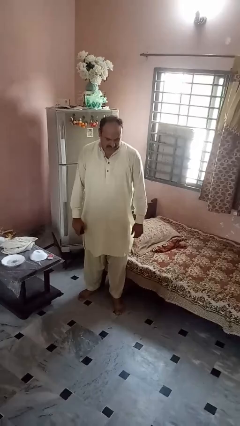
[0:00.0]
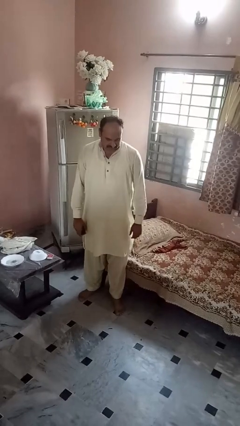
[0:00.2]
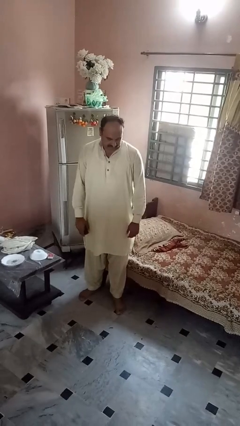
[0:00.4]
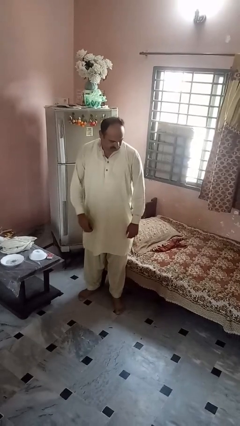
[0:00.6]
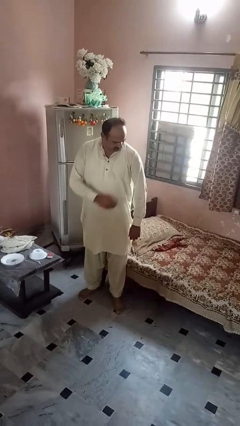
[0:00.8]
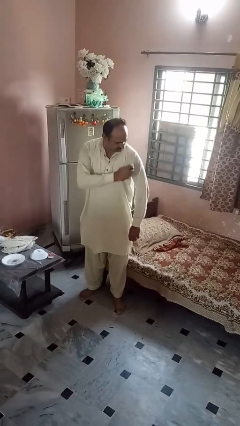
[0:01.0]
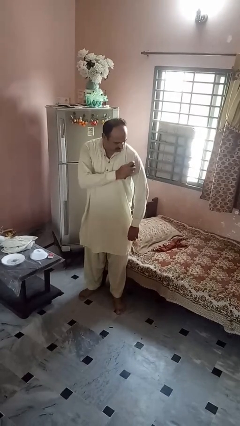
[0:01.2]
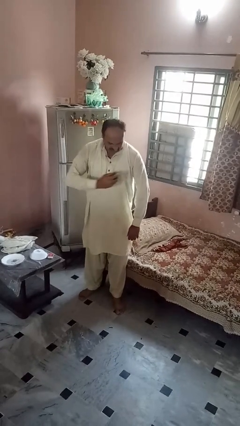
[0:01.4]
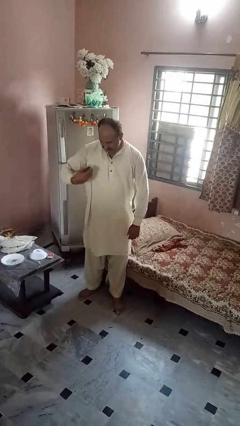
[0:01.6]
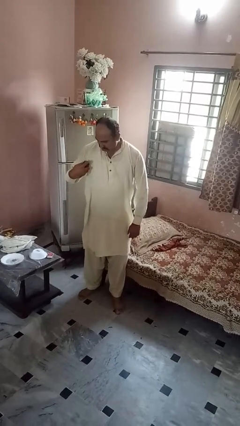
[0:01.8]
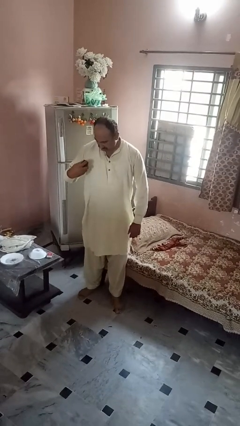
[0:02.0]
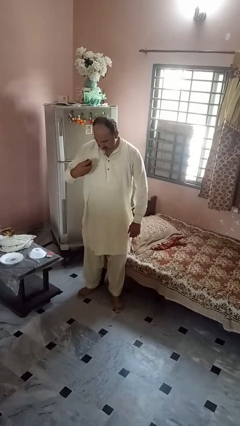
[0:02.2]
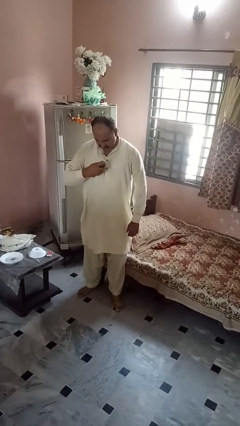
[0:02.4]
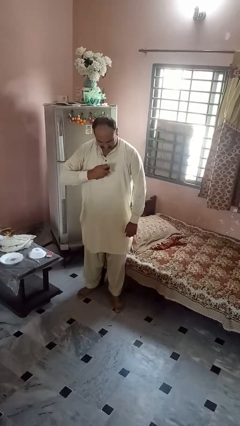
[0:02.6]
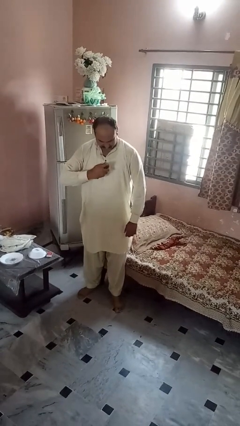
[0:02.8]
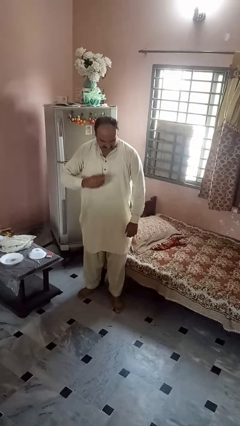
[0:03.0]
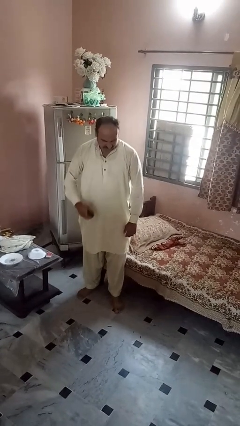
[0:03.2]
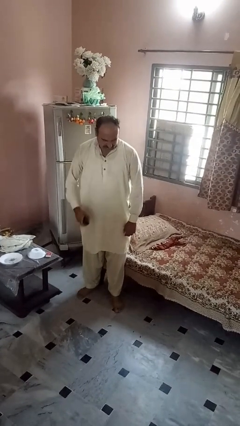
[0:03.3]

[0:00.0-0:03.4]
person applies deodorant

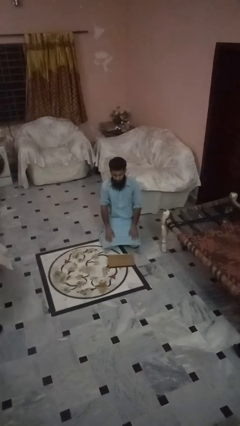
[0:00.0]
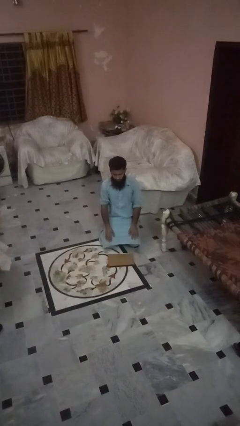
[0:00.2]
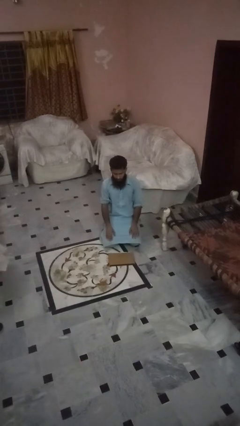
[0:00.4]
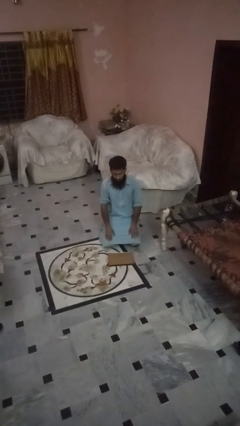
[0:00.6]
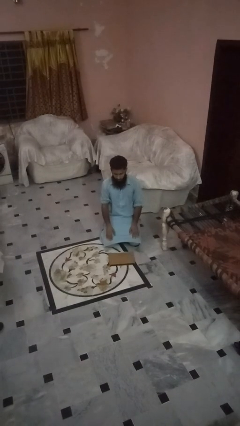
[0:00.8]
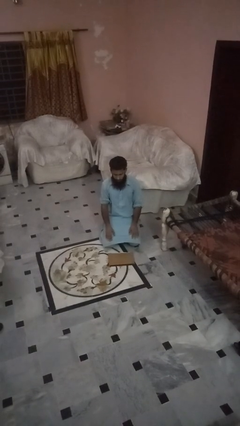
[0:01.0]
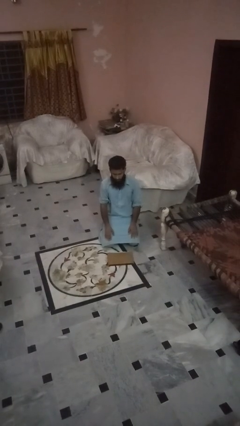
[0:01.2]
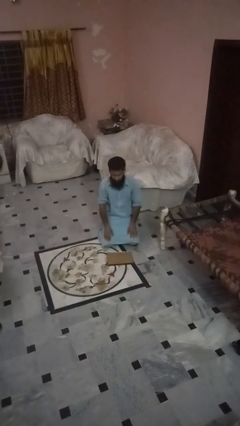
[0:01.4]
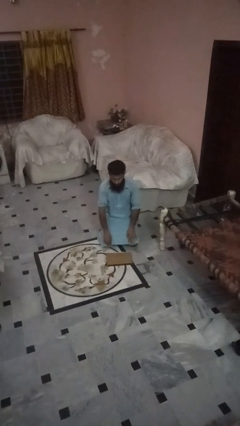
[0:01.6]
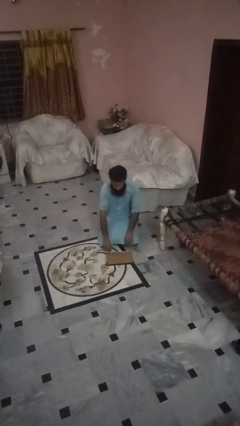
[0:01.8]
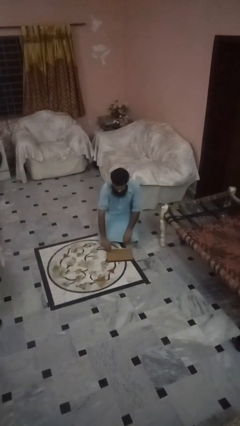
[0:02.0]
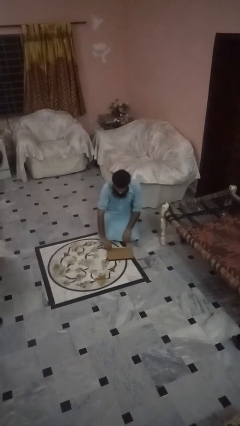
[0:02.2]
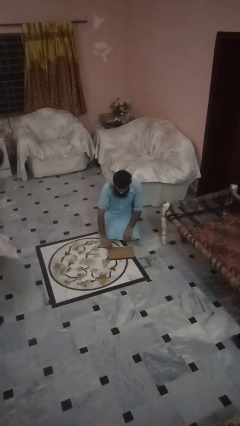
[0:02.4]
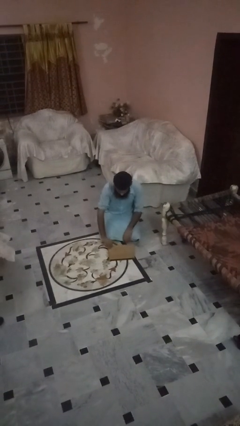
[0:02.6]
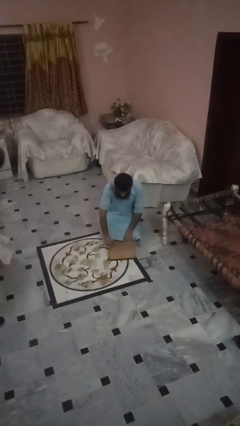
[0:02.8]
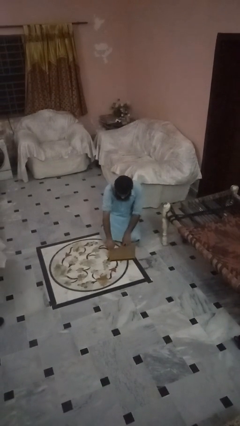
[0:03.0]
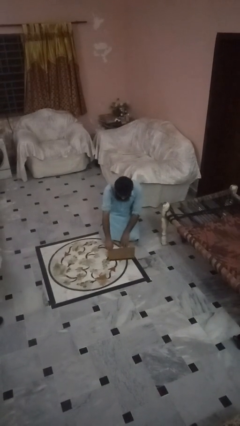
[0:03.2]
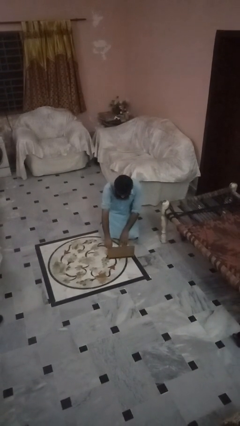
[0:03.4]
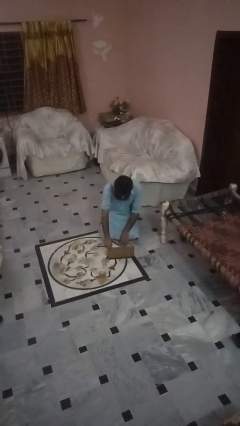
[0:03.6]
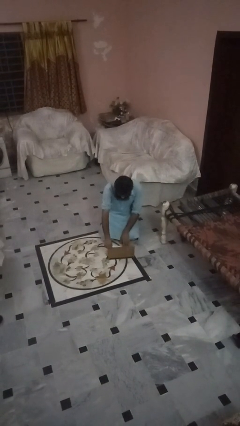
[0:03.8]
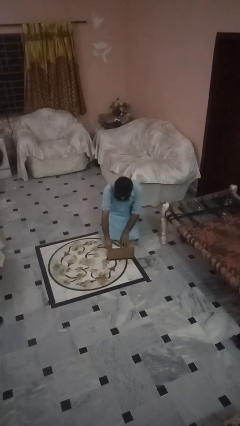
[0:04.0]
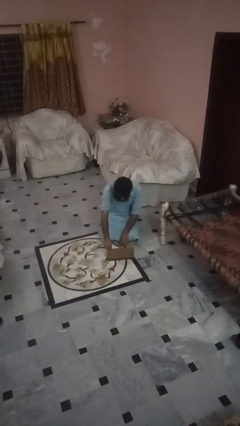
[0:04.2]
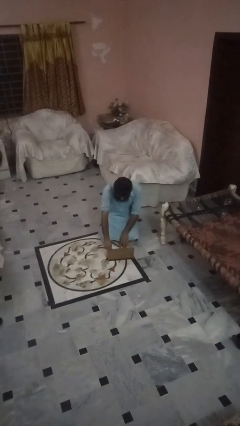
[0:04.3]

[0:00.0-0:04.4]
person opens laptop

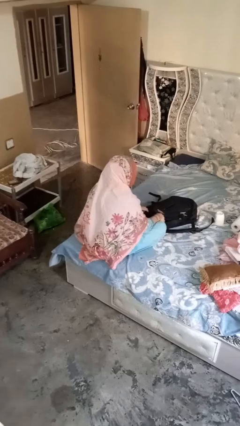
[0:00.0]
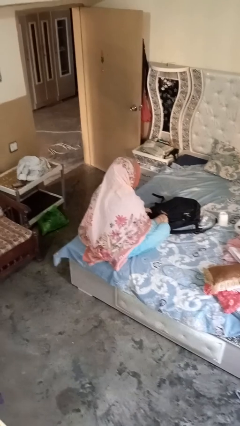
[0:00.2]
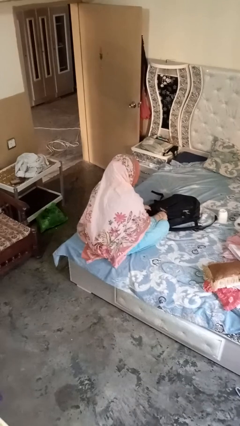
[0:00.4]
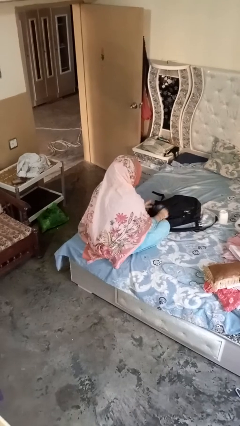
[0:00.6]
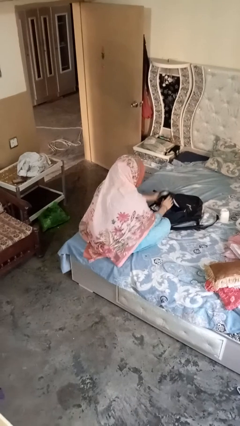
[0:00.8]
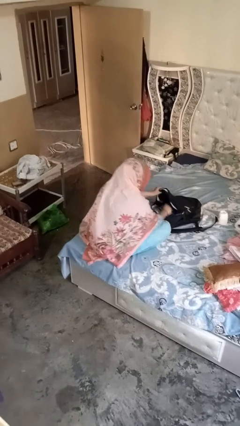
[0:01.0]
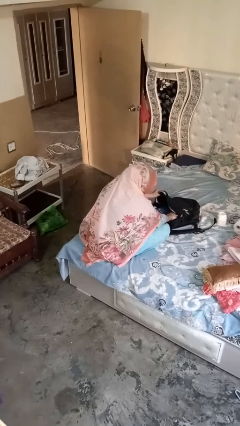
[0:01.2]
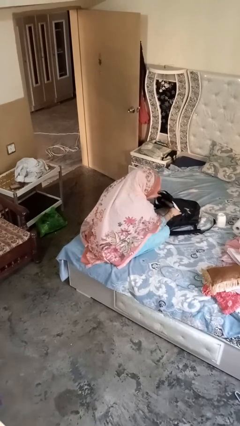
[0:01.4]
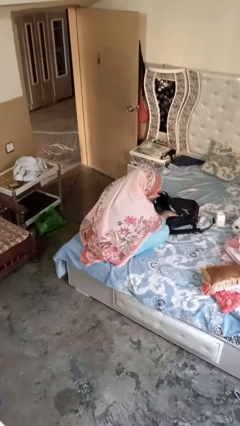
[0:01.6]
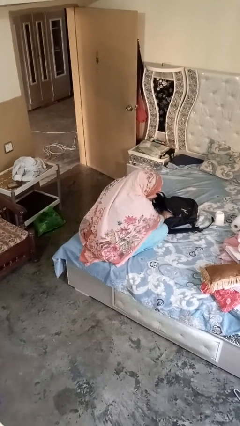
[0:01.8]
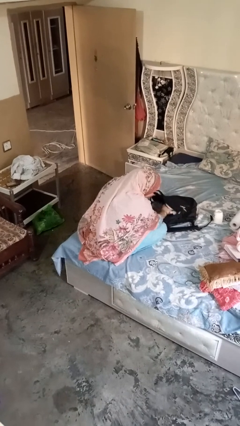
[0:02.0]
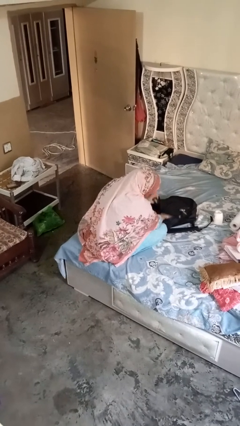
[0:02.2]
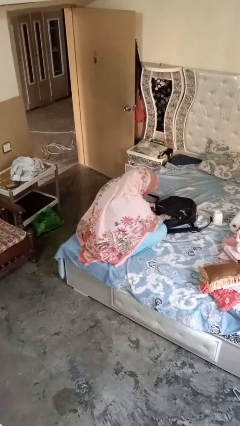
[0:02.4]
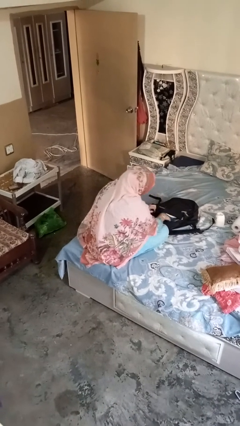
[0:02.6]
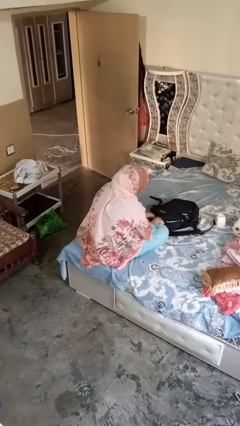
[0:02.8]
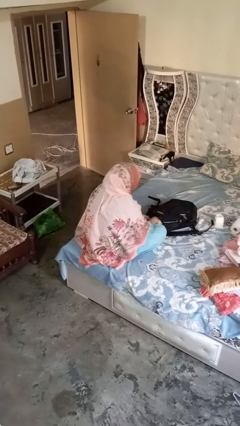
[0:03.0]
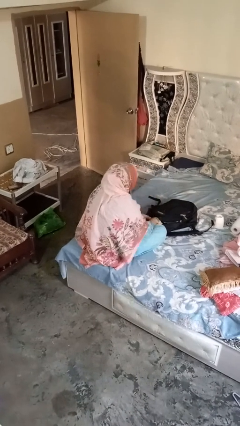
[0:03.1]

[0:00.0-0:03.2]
person searches in bag

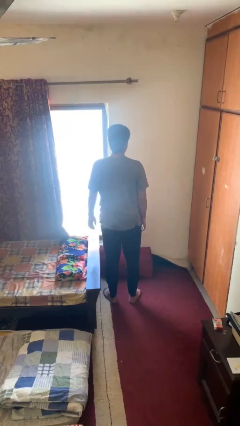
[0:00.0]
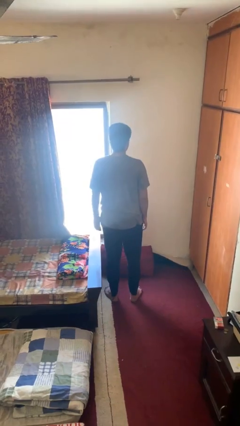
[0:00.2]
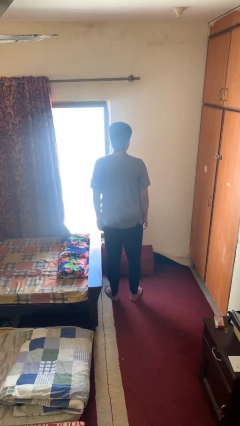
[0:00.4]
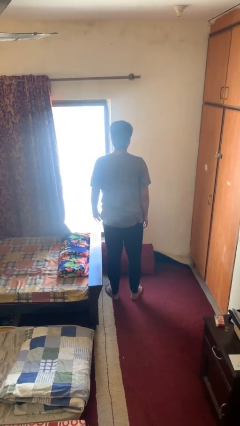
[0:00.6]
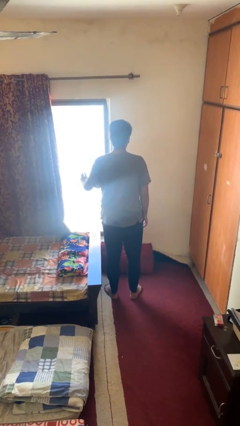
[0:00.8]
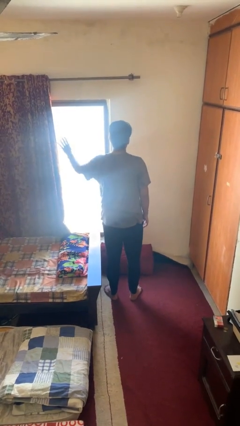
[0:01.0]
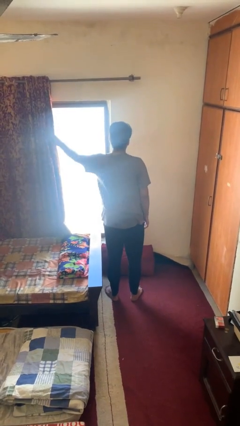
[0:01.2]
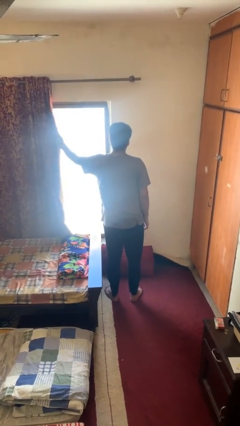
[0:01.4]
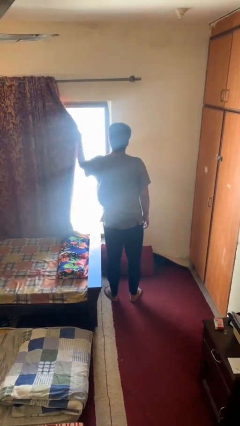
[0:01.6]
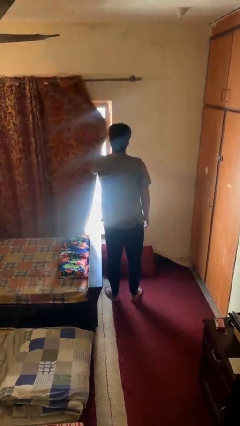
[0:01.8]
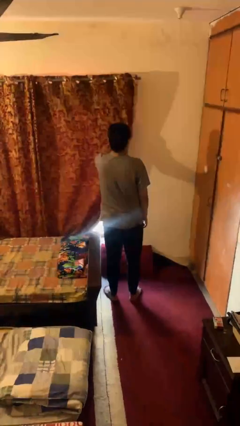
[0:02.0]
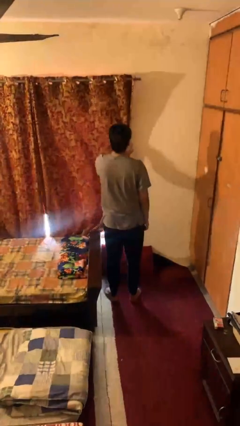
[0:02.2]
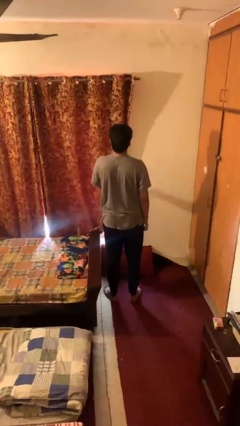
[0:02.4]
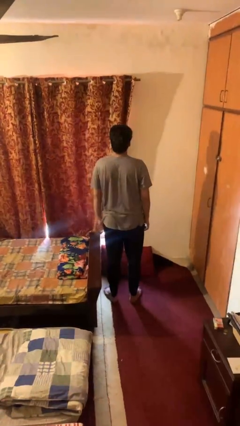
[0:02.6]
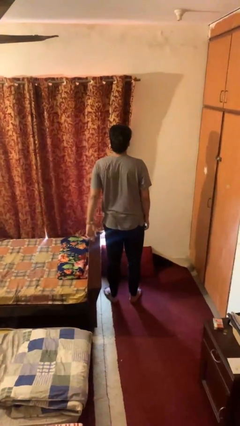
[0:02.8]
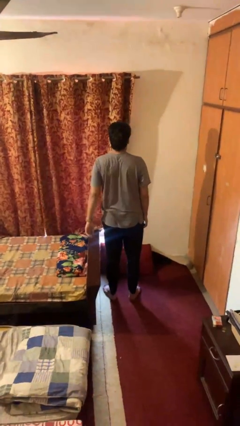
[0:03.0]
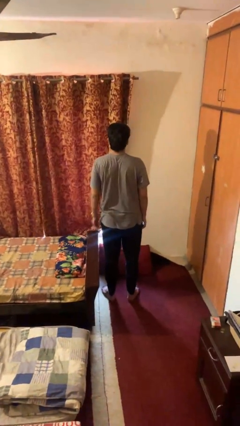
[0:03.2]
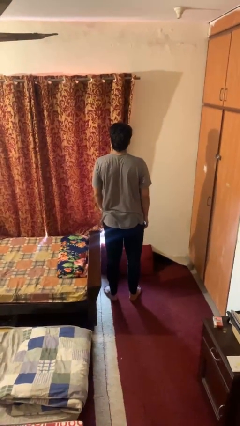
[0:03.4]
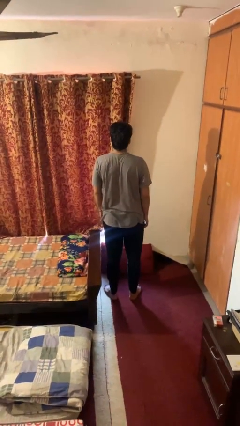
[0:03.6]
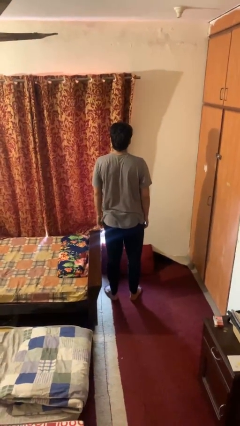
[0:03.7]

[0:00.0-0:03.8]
person closes curtains

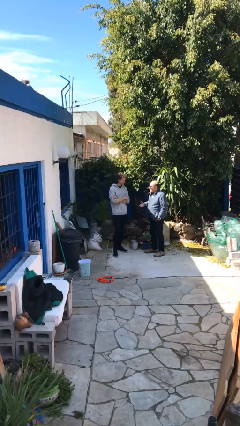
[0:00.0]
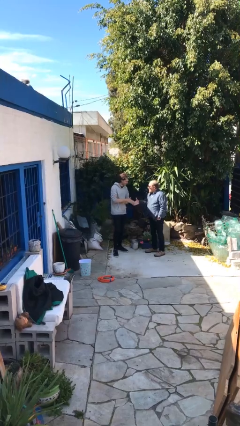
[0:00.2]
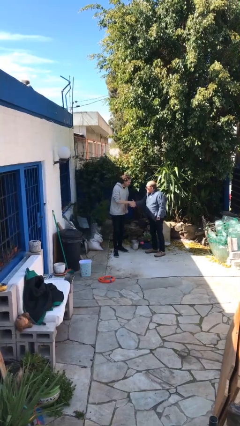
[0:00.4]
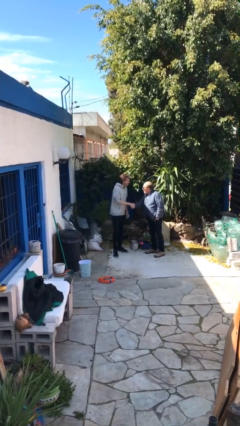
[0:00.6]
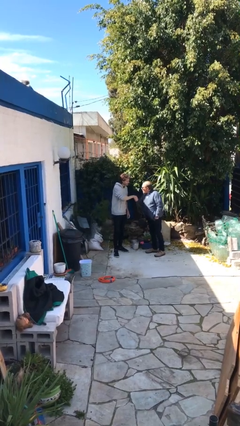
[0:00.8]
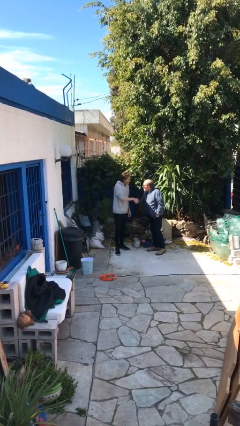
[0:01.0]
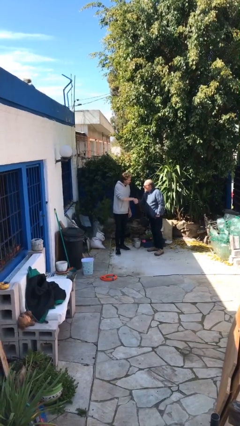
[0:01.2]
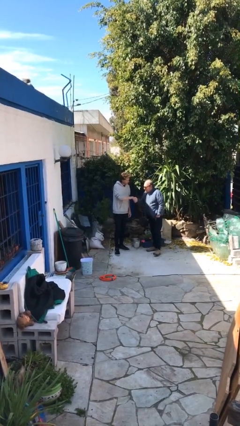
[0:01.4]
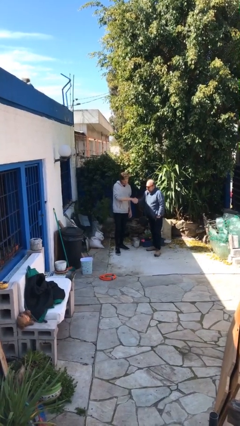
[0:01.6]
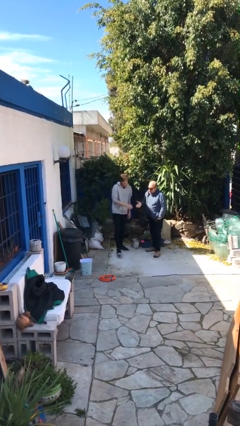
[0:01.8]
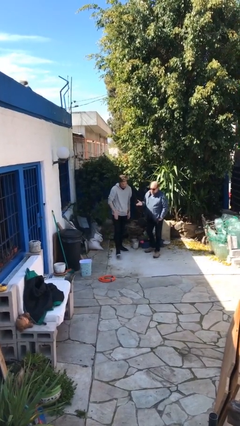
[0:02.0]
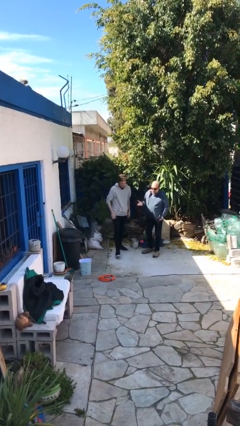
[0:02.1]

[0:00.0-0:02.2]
person shakes hand

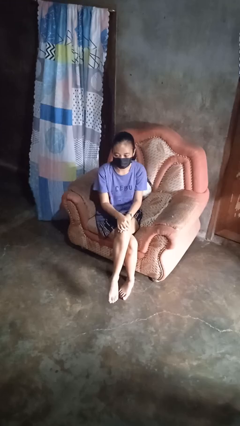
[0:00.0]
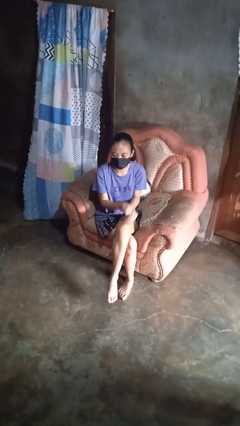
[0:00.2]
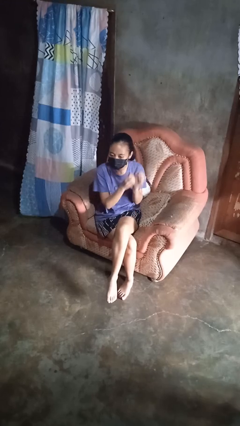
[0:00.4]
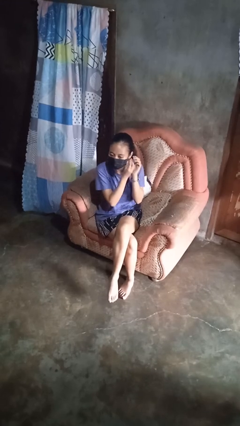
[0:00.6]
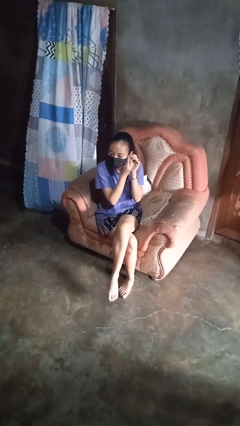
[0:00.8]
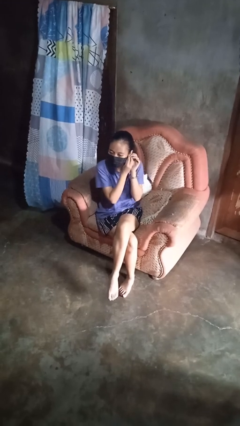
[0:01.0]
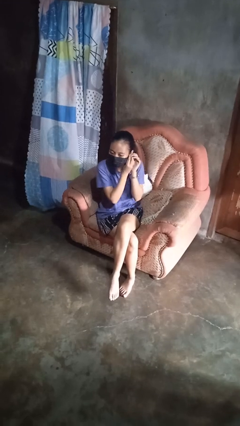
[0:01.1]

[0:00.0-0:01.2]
person takes off earrings
